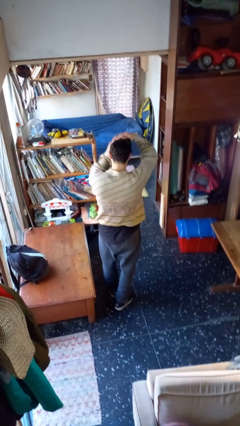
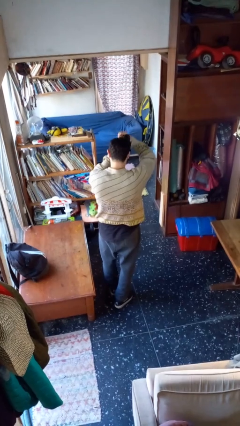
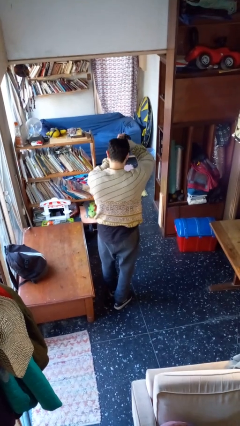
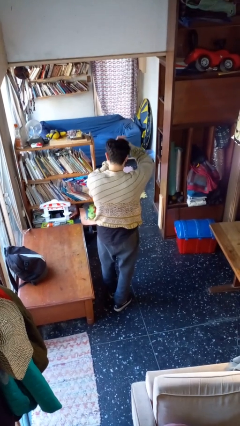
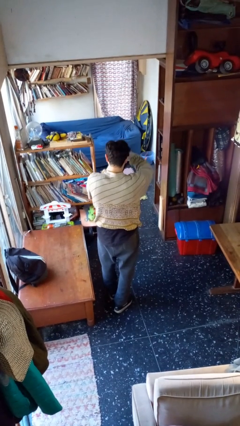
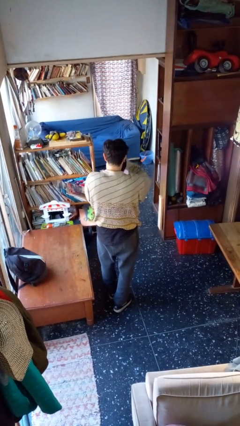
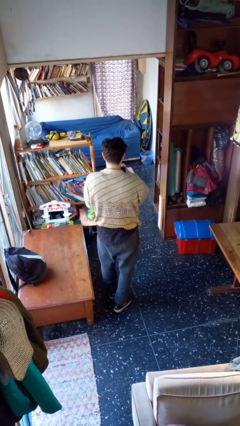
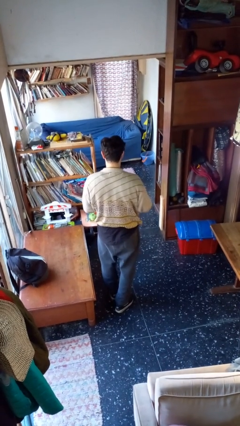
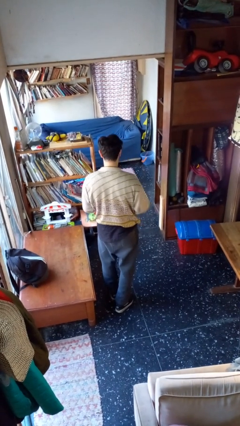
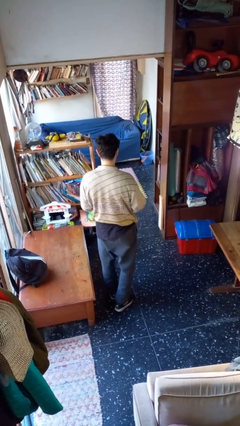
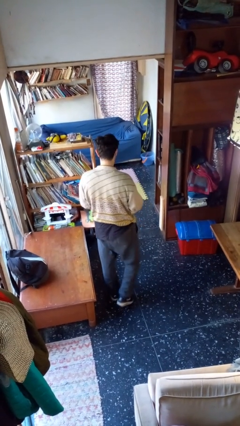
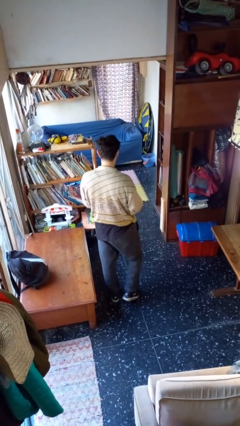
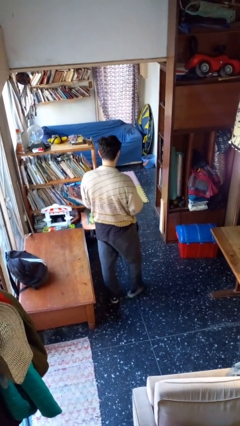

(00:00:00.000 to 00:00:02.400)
person takes off facemask

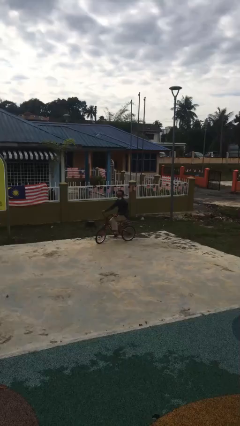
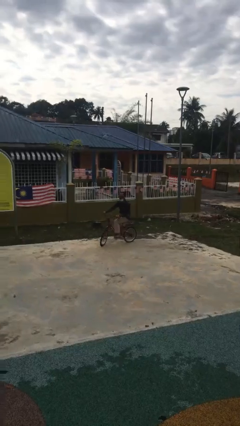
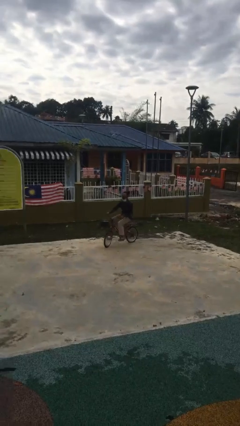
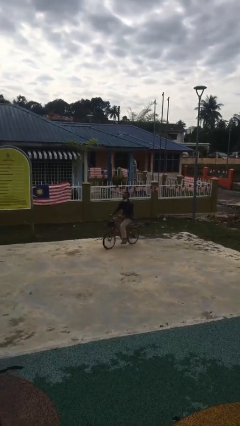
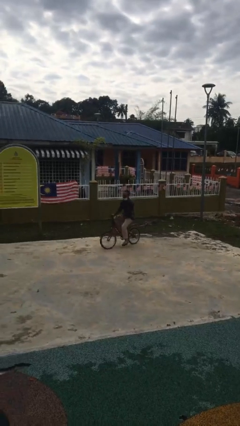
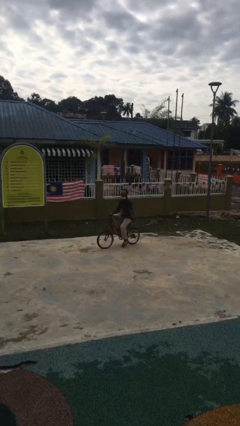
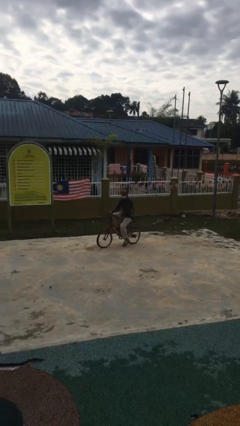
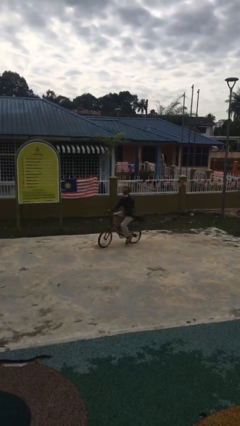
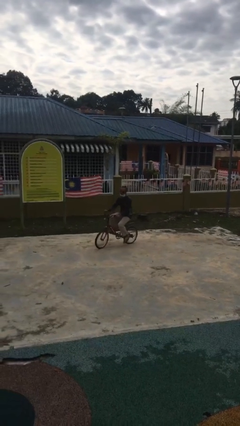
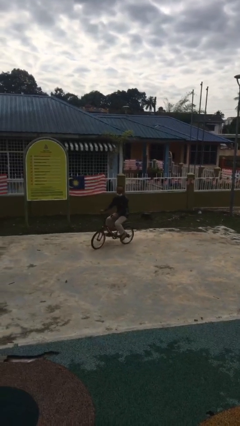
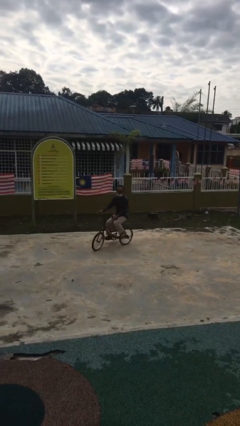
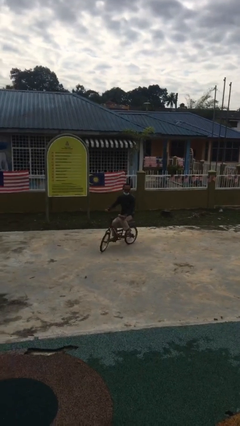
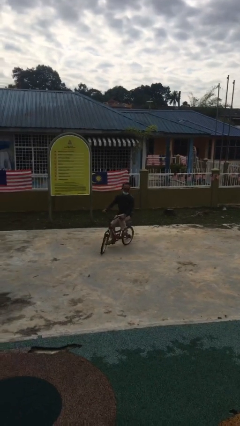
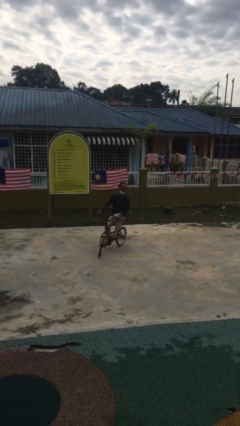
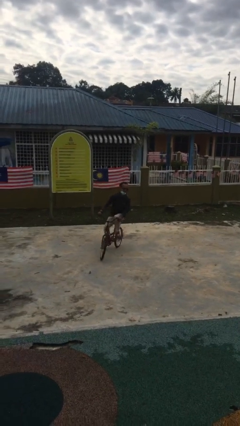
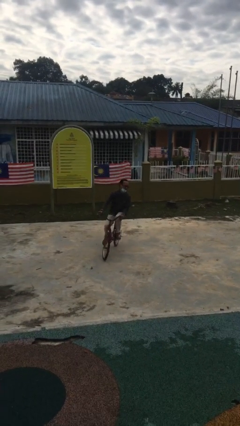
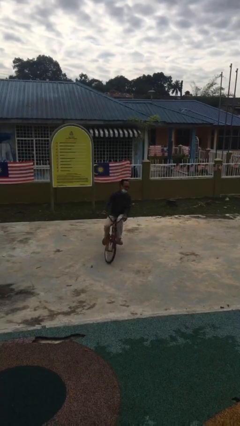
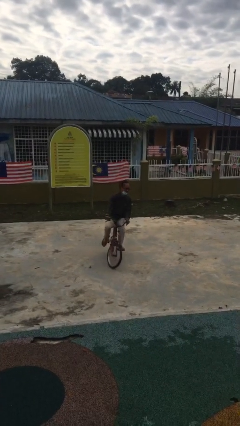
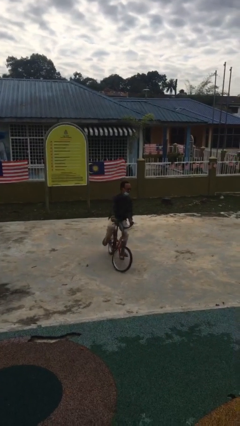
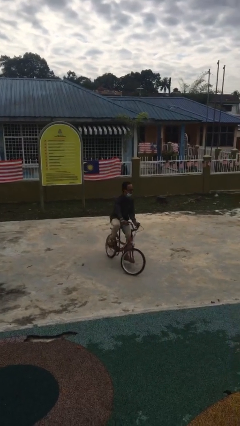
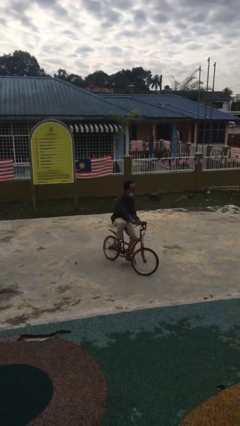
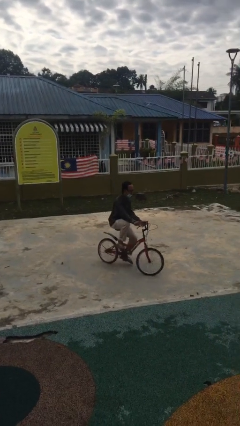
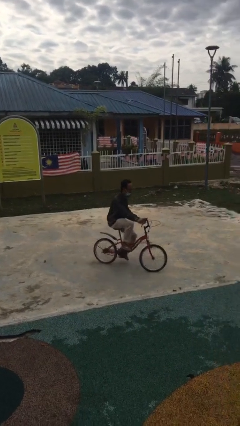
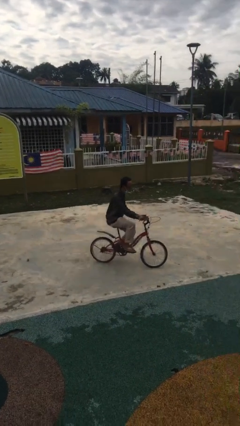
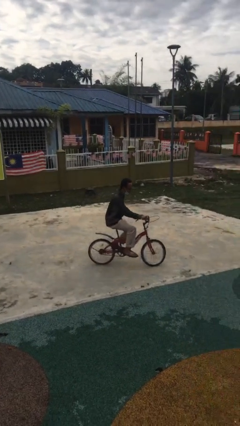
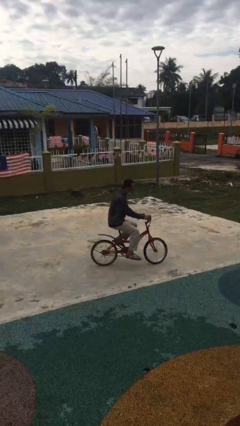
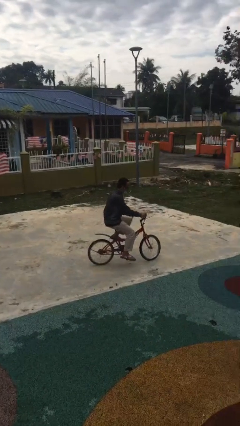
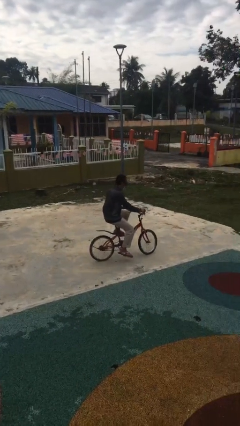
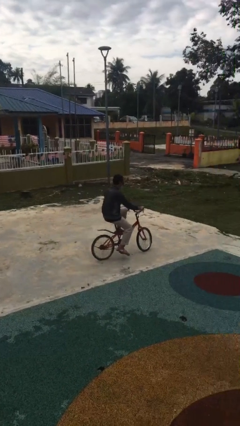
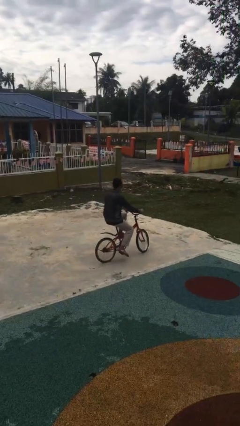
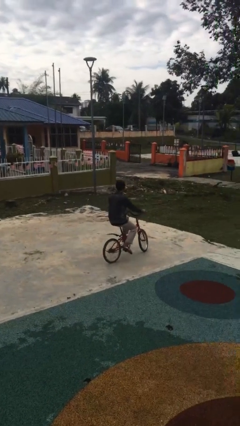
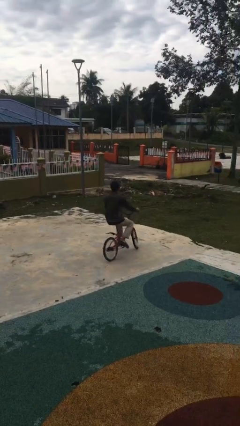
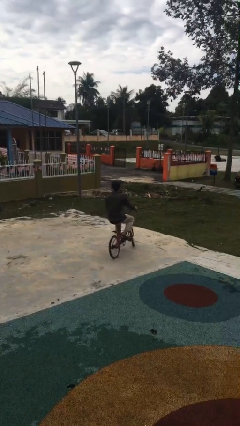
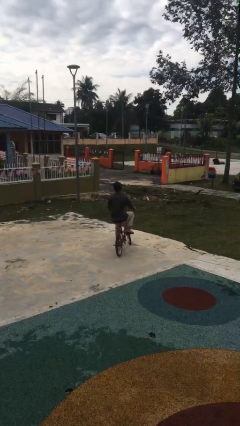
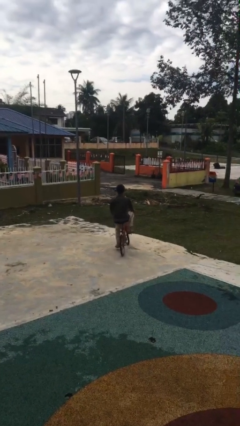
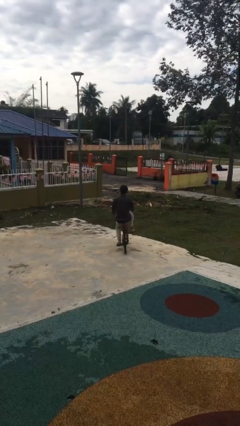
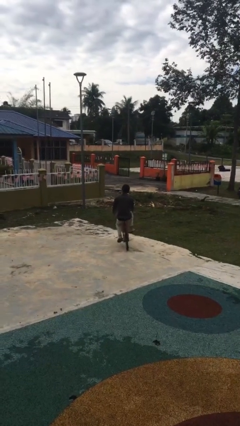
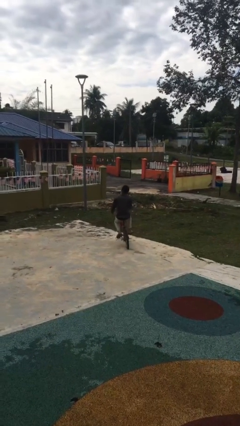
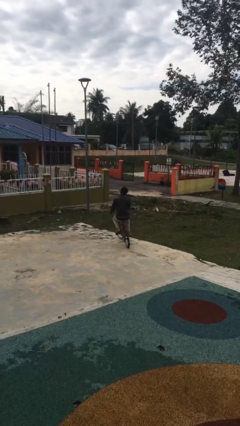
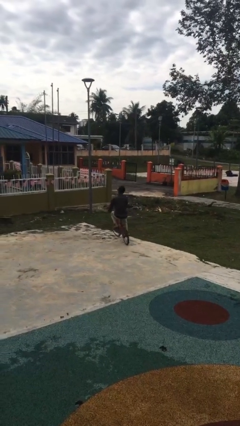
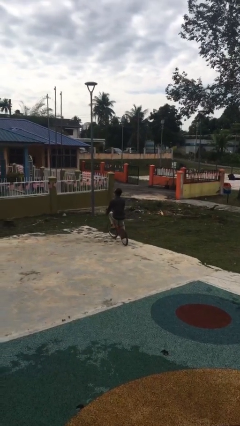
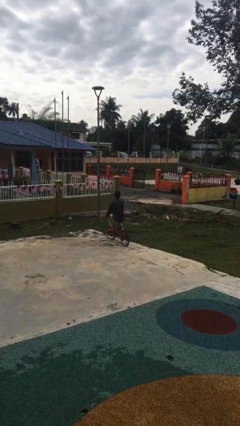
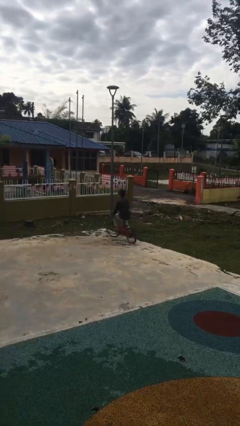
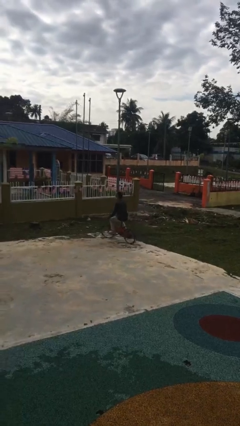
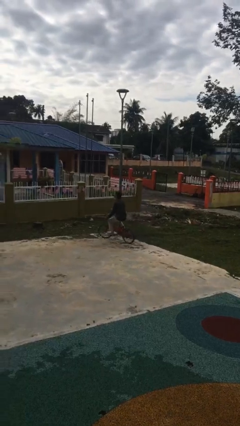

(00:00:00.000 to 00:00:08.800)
person rides bicycle

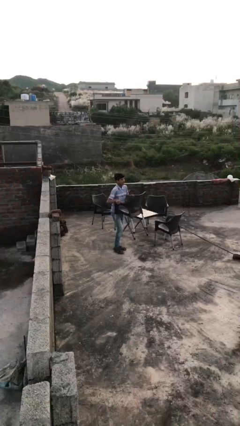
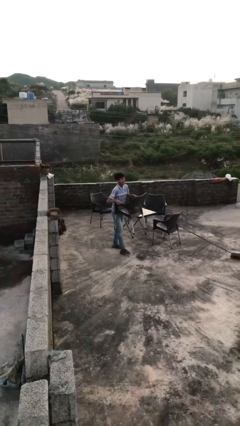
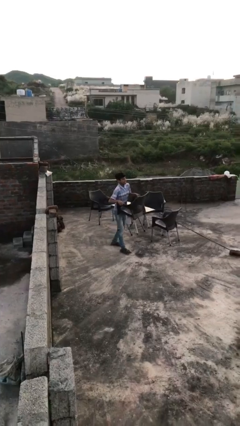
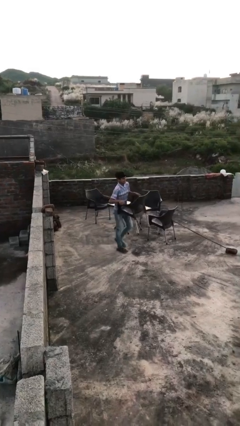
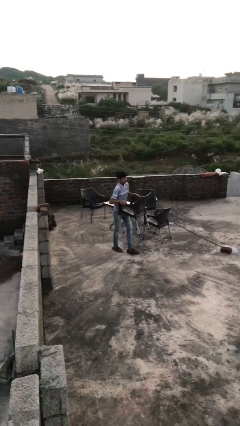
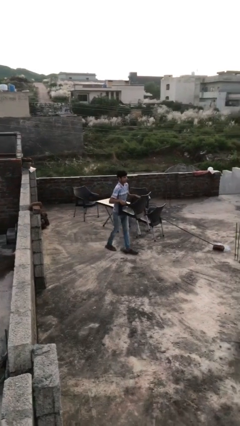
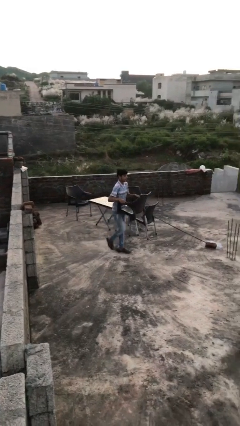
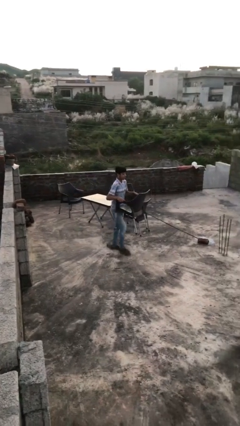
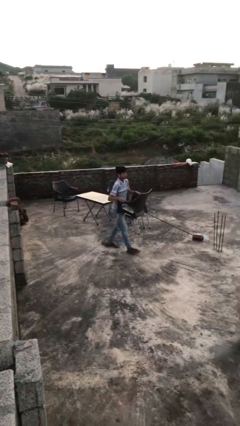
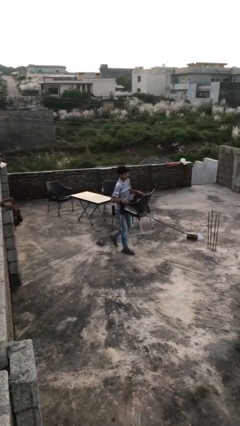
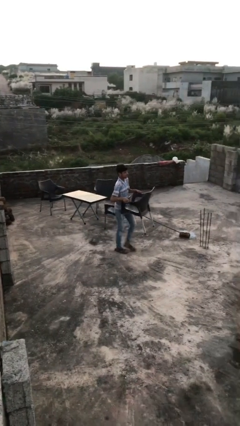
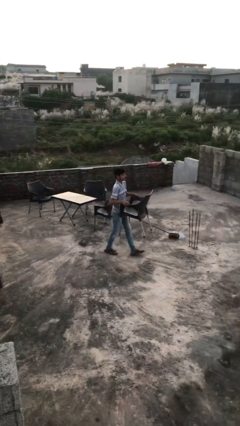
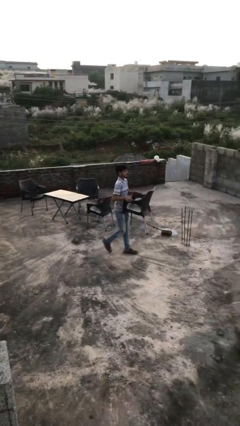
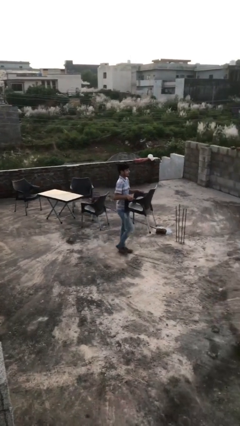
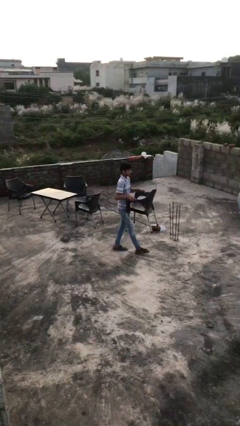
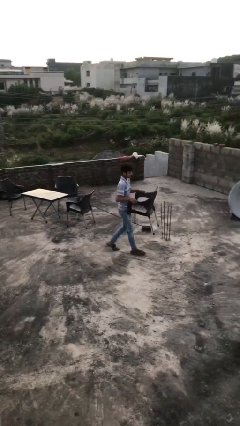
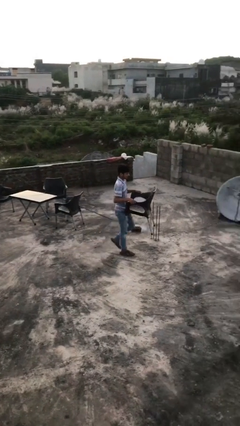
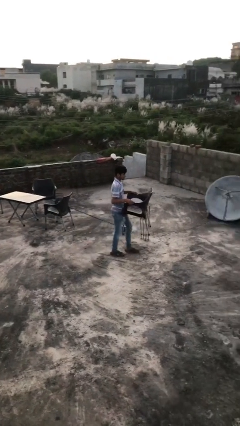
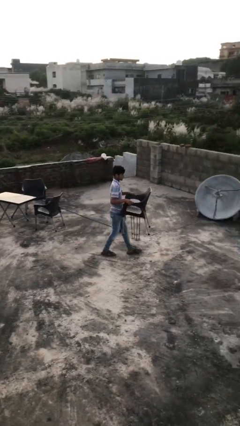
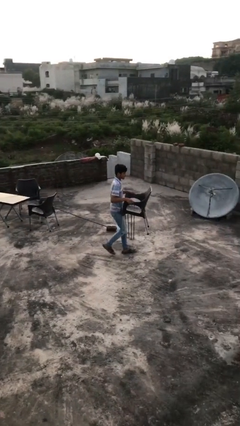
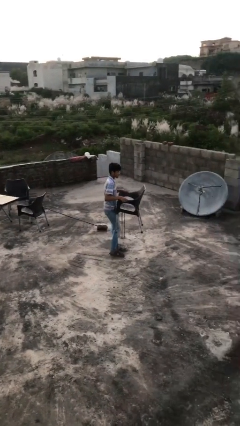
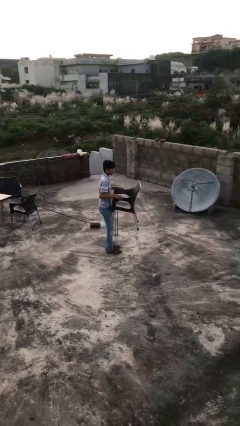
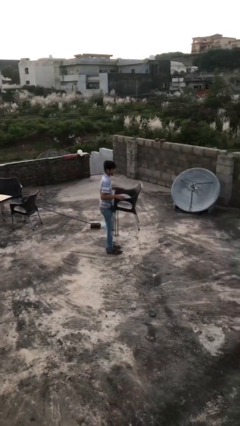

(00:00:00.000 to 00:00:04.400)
person carries heavy object

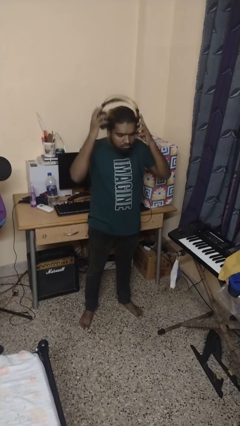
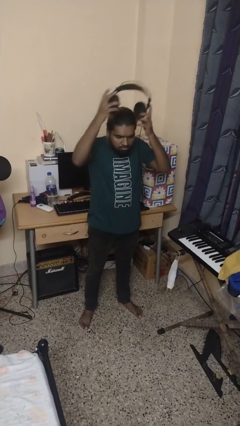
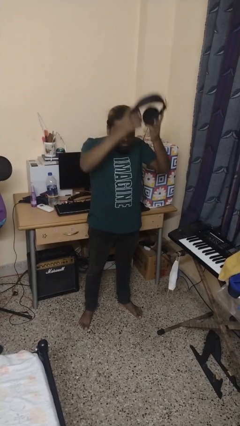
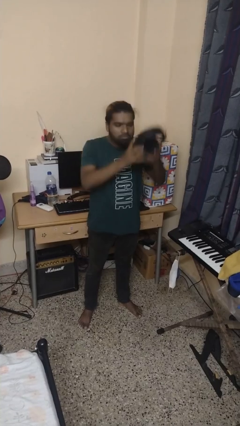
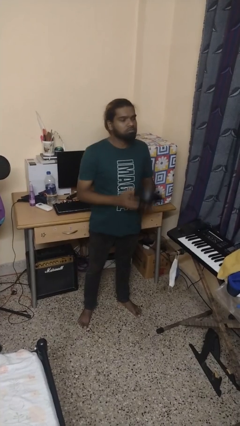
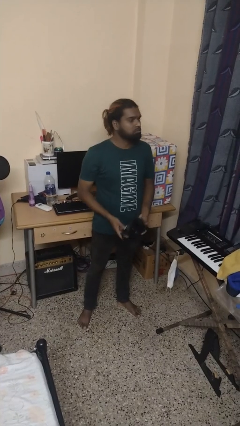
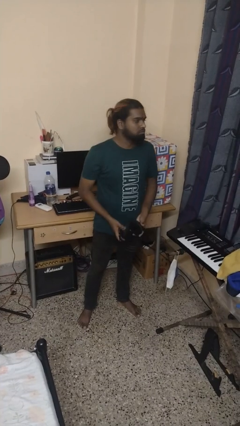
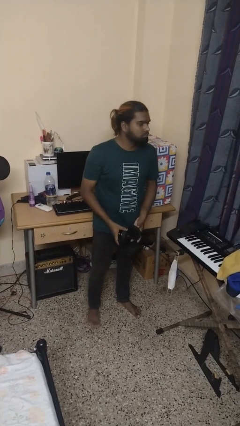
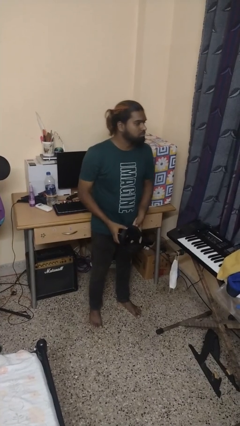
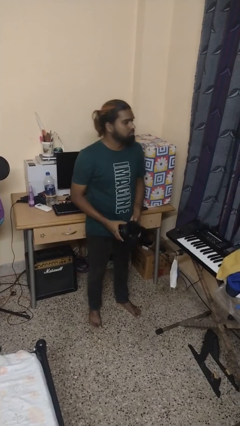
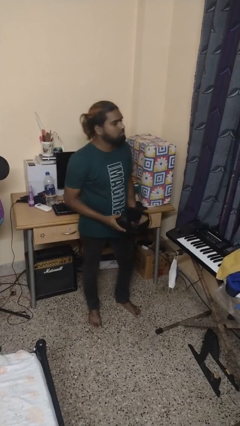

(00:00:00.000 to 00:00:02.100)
person takes off headphones
